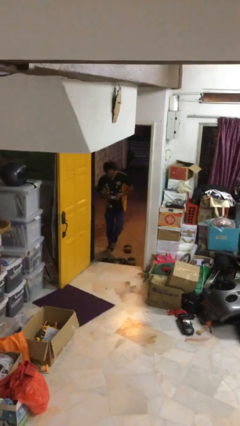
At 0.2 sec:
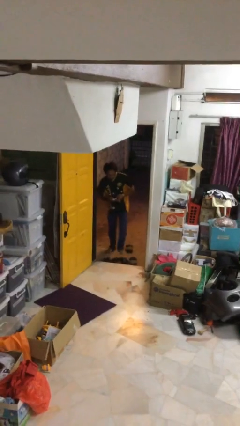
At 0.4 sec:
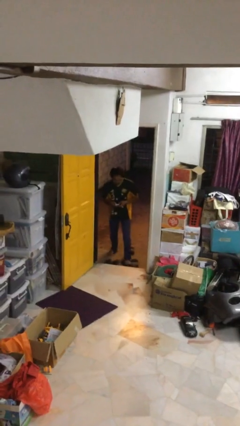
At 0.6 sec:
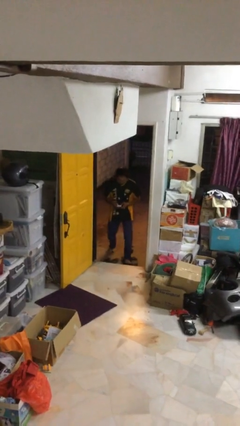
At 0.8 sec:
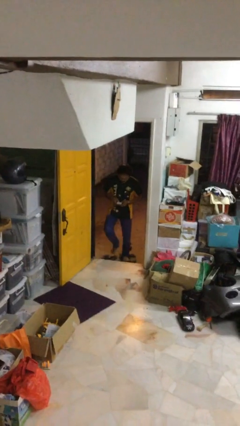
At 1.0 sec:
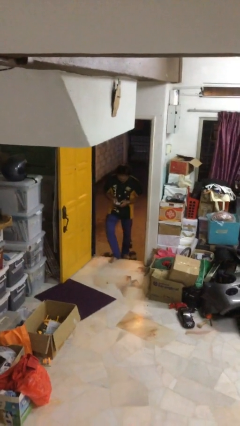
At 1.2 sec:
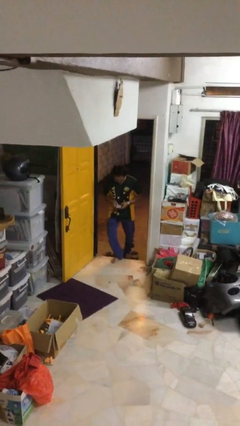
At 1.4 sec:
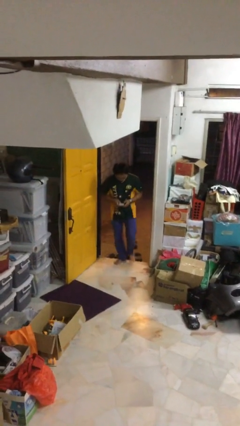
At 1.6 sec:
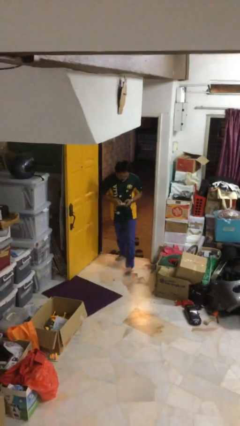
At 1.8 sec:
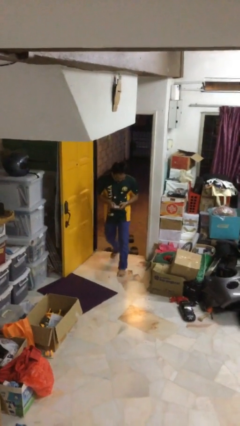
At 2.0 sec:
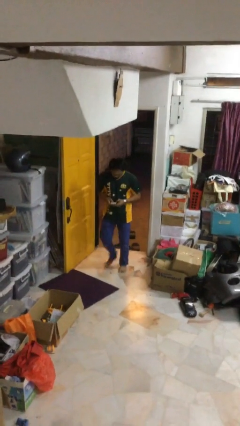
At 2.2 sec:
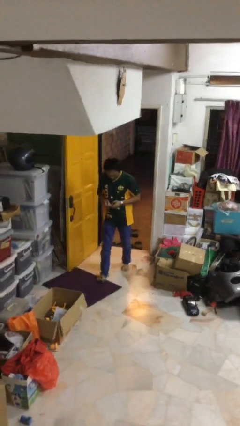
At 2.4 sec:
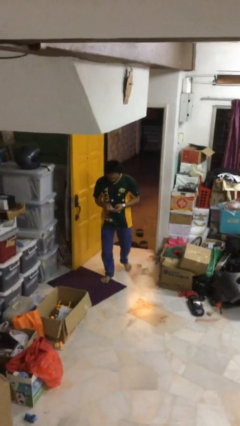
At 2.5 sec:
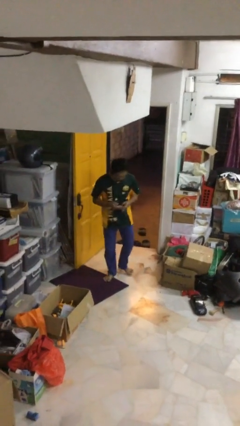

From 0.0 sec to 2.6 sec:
person enters scene through structure

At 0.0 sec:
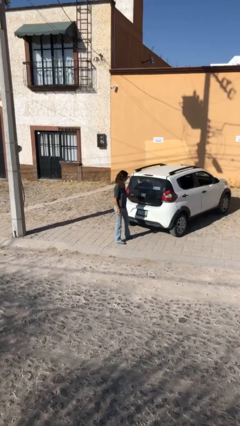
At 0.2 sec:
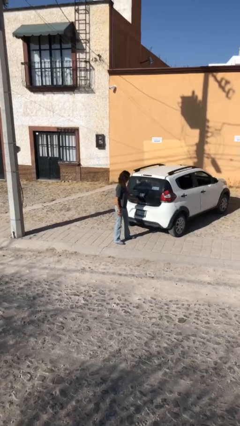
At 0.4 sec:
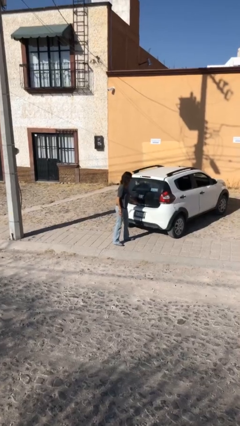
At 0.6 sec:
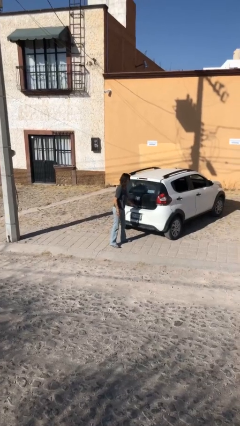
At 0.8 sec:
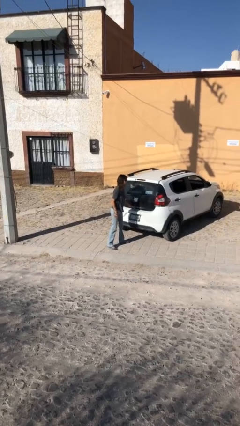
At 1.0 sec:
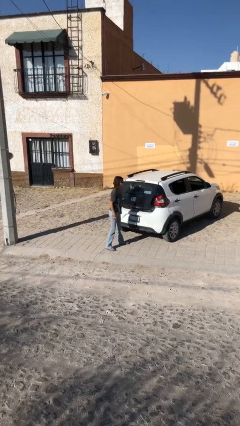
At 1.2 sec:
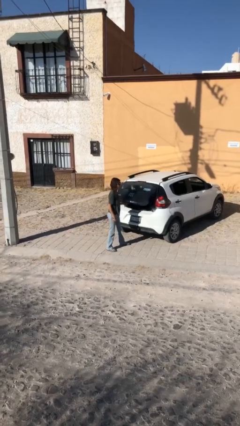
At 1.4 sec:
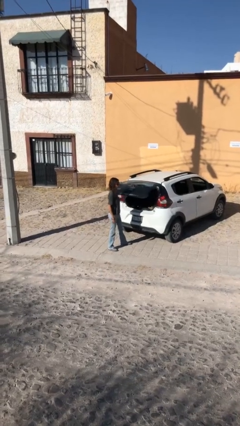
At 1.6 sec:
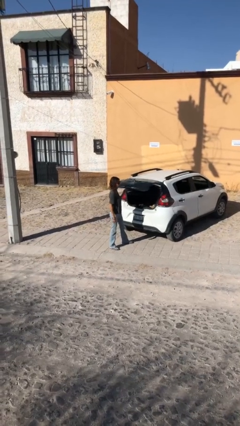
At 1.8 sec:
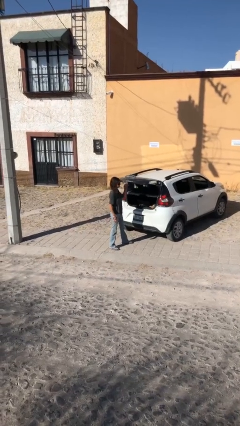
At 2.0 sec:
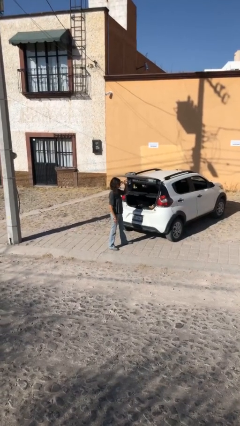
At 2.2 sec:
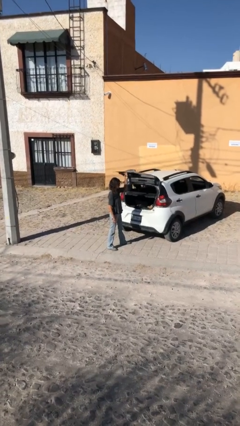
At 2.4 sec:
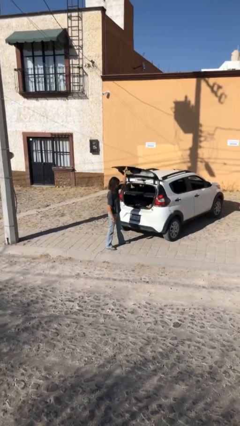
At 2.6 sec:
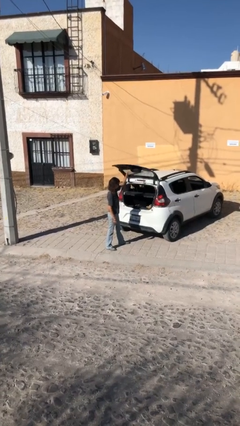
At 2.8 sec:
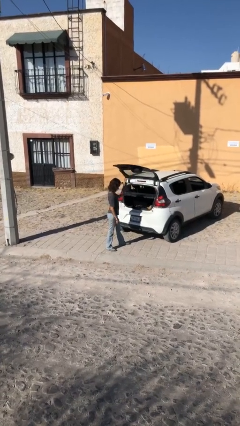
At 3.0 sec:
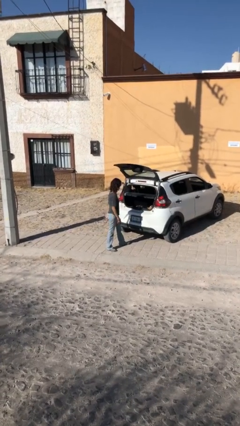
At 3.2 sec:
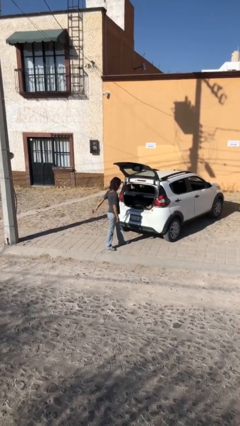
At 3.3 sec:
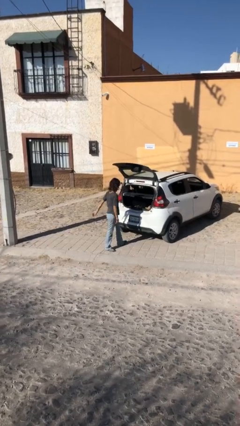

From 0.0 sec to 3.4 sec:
person opens car trunk

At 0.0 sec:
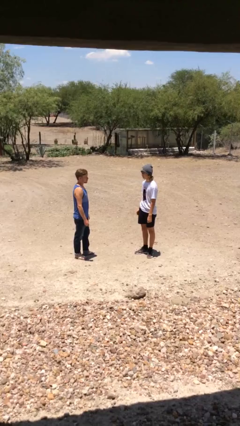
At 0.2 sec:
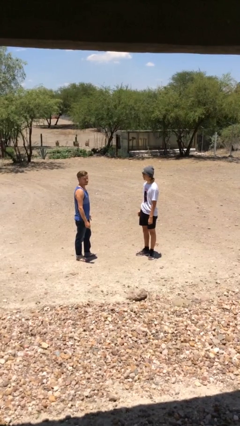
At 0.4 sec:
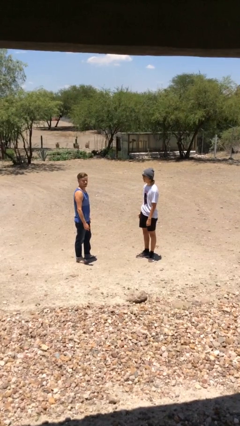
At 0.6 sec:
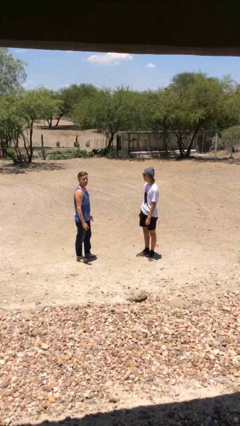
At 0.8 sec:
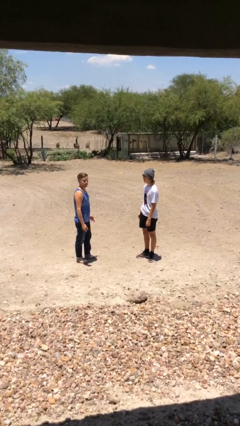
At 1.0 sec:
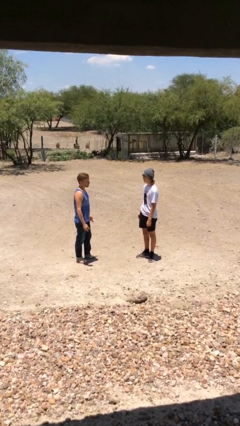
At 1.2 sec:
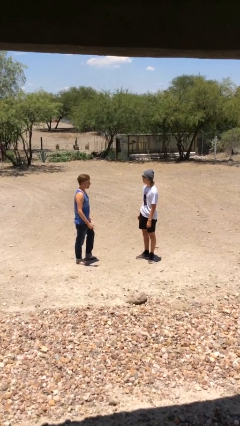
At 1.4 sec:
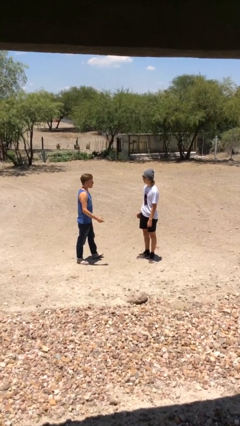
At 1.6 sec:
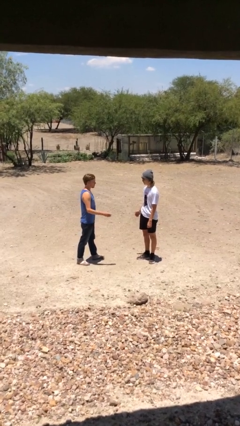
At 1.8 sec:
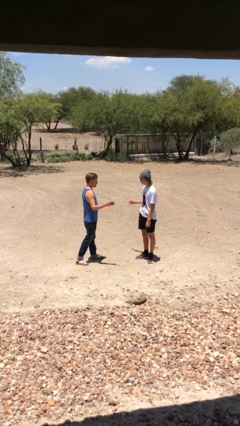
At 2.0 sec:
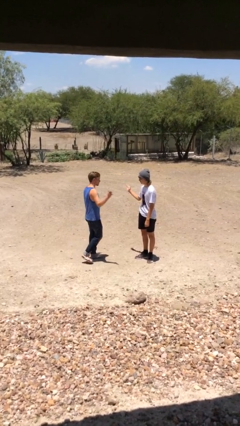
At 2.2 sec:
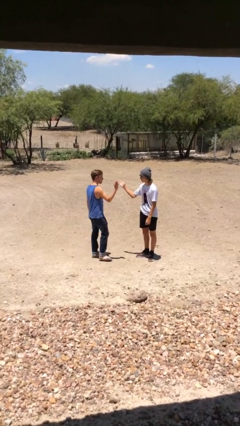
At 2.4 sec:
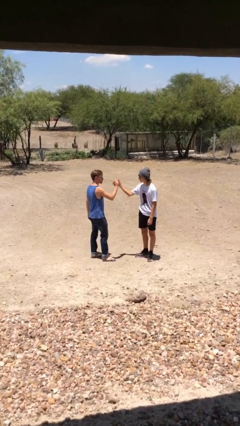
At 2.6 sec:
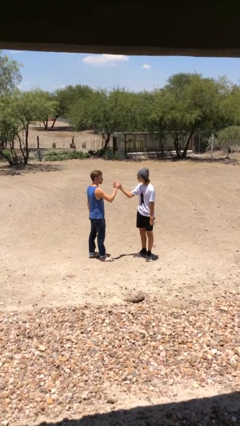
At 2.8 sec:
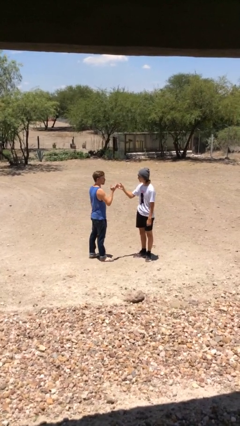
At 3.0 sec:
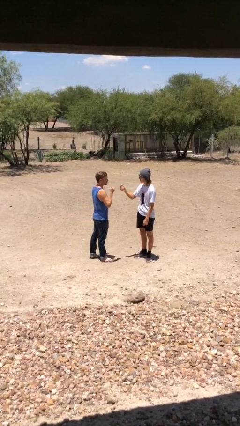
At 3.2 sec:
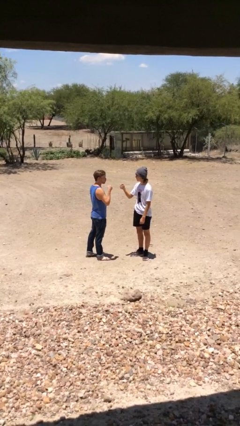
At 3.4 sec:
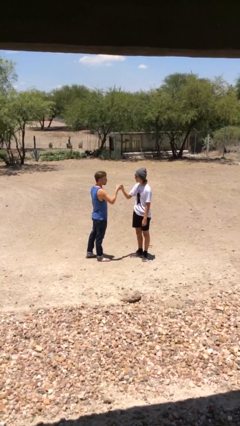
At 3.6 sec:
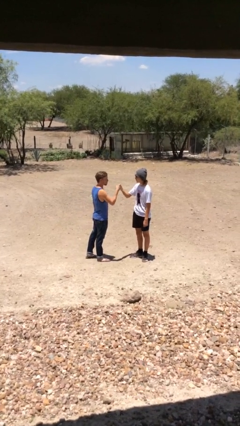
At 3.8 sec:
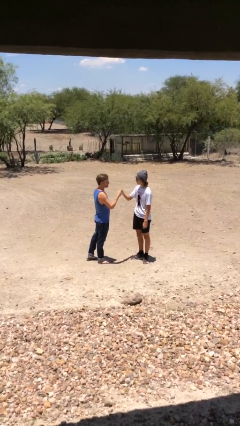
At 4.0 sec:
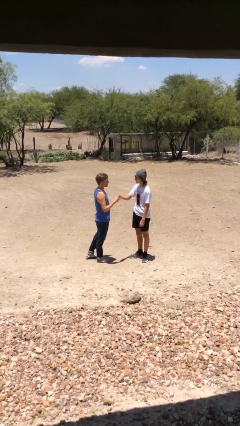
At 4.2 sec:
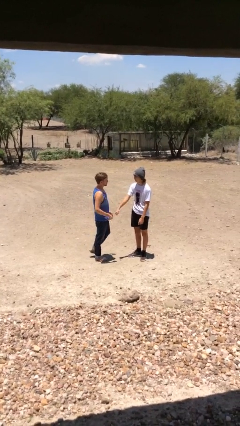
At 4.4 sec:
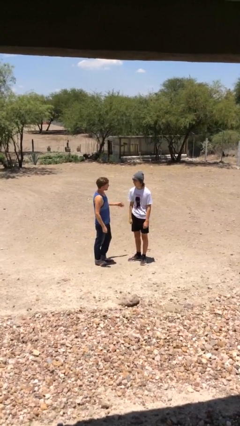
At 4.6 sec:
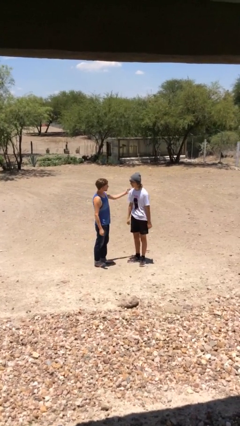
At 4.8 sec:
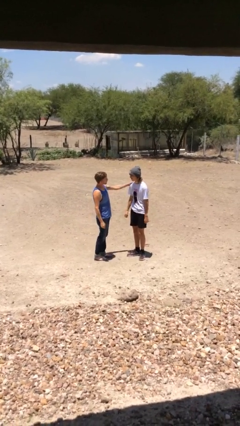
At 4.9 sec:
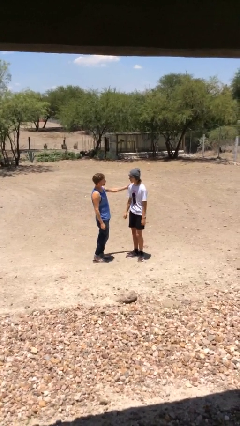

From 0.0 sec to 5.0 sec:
person highfives hand

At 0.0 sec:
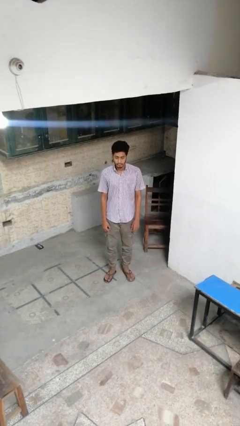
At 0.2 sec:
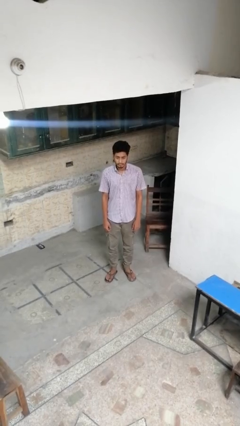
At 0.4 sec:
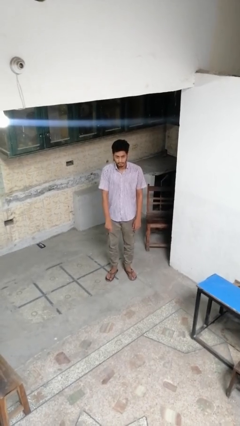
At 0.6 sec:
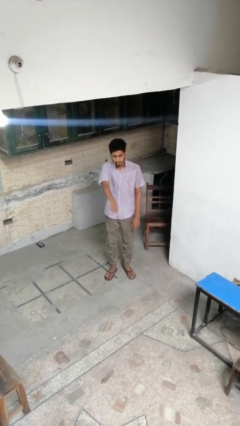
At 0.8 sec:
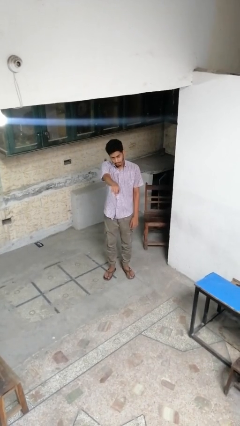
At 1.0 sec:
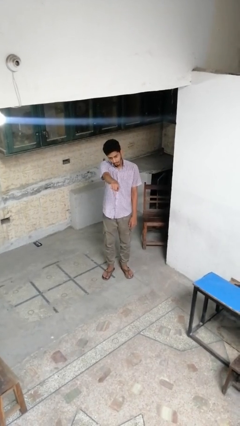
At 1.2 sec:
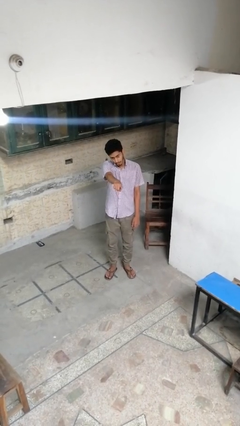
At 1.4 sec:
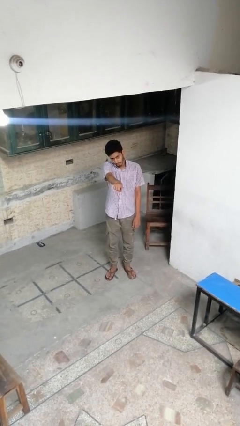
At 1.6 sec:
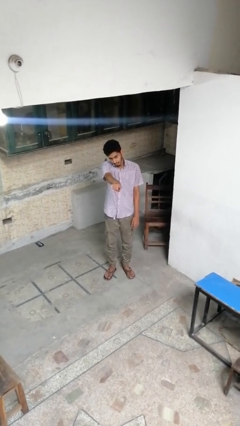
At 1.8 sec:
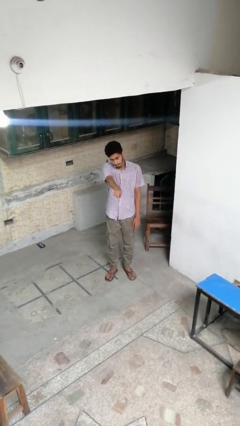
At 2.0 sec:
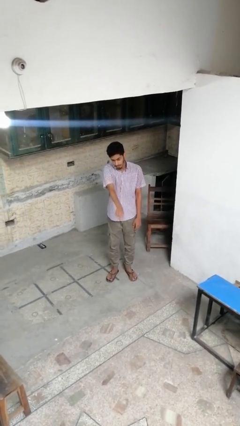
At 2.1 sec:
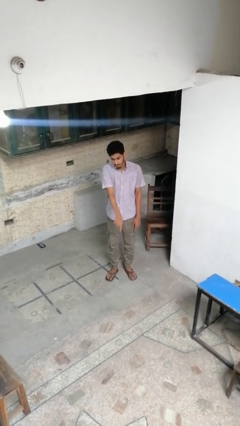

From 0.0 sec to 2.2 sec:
person points at person

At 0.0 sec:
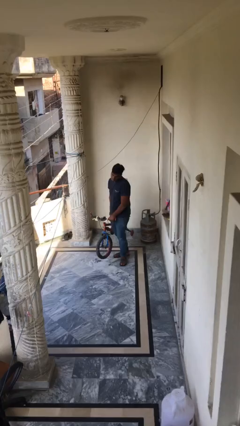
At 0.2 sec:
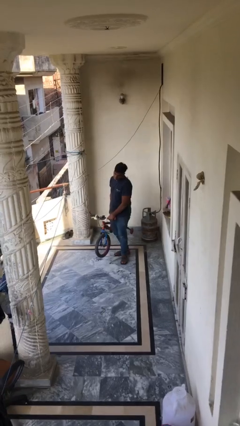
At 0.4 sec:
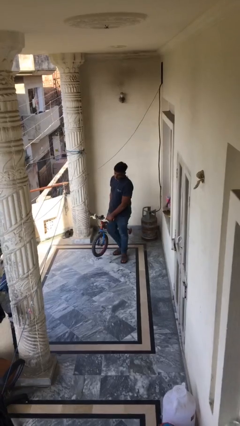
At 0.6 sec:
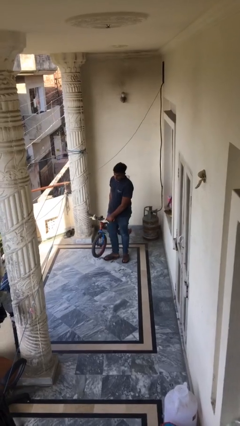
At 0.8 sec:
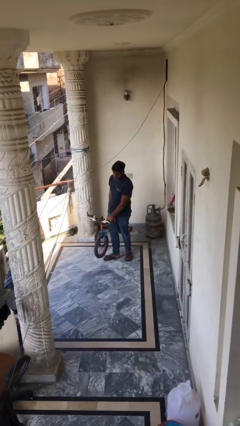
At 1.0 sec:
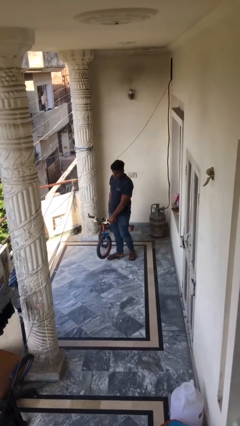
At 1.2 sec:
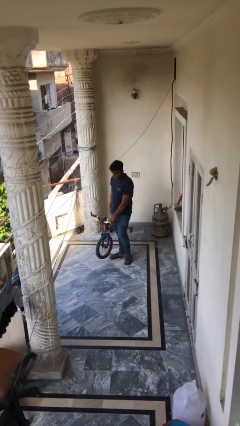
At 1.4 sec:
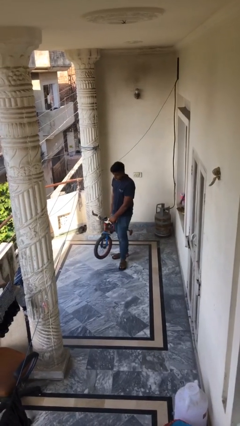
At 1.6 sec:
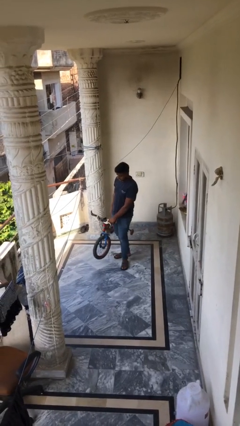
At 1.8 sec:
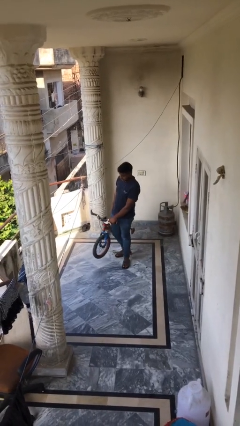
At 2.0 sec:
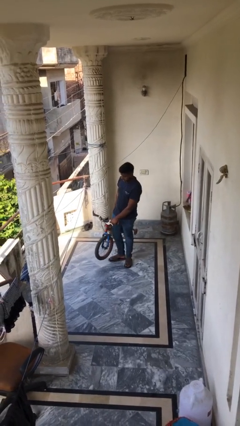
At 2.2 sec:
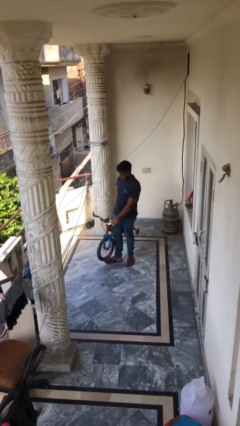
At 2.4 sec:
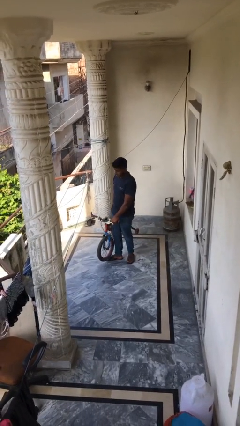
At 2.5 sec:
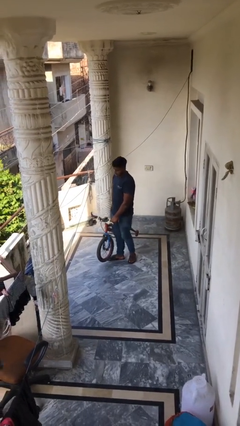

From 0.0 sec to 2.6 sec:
person carries heavy object

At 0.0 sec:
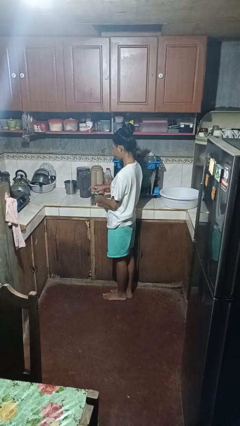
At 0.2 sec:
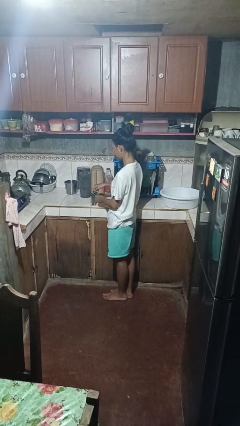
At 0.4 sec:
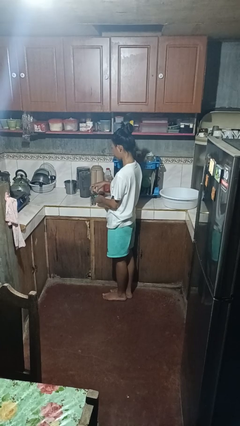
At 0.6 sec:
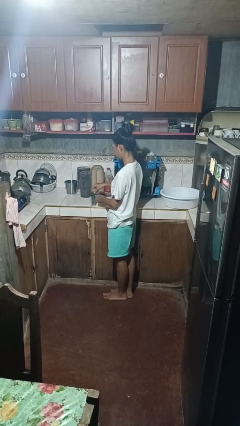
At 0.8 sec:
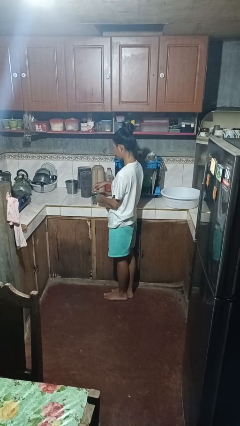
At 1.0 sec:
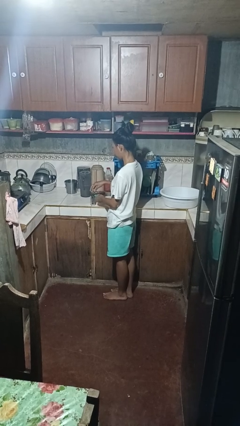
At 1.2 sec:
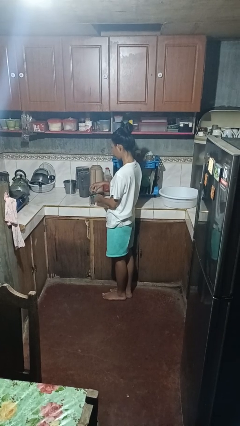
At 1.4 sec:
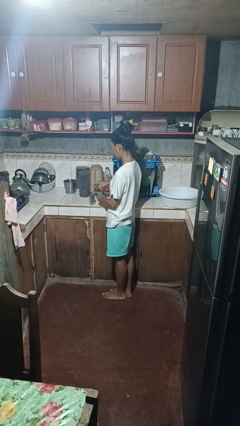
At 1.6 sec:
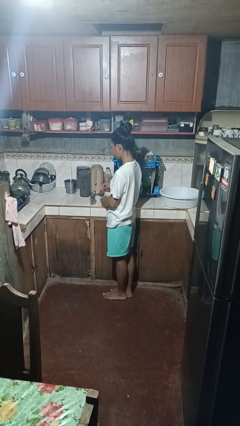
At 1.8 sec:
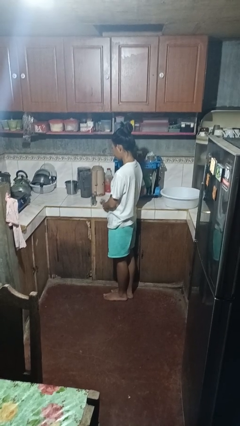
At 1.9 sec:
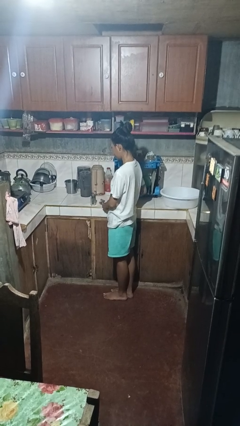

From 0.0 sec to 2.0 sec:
person opens can with can opener
